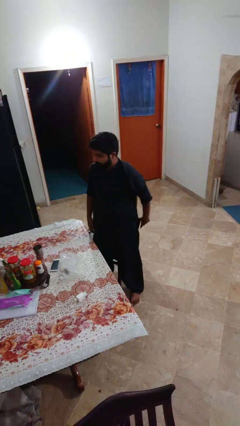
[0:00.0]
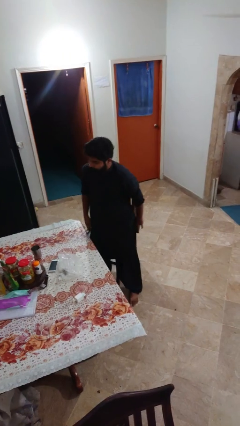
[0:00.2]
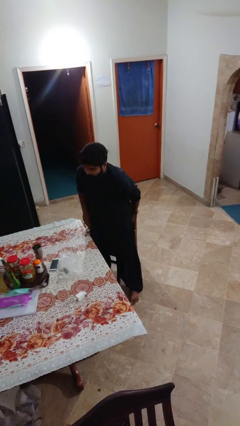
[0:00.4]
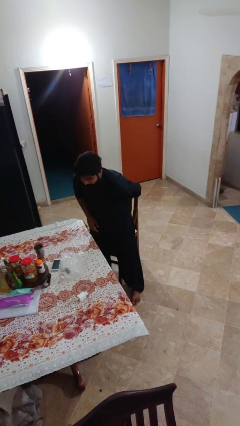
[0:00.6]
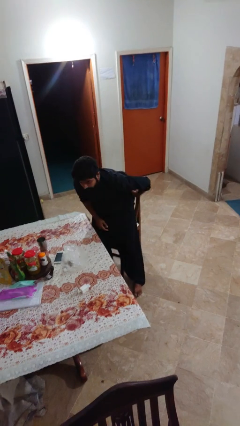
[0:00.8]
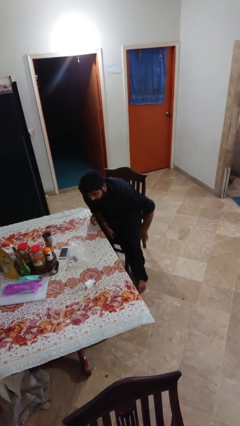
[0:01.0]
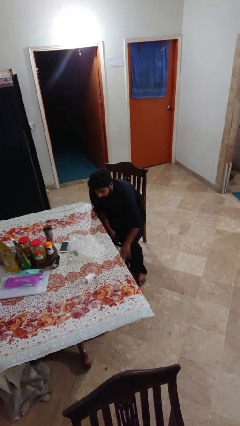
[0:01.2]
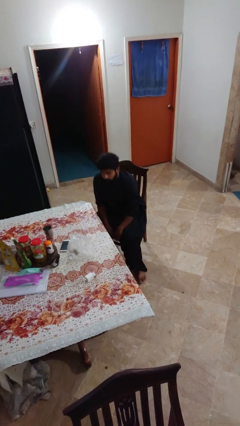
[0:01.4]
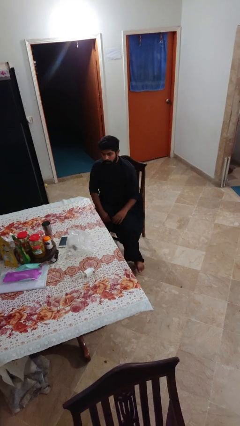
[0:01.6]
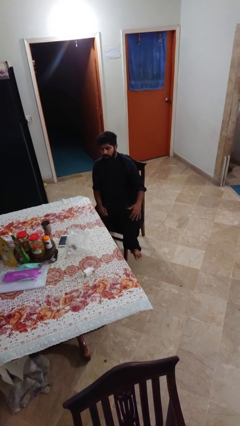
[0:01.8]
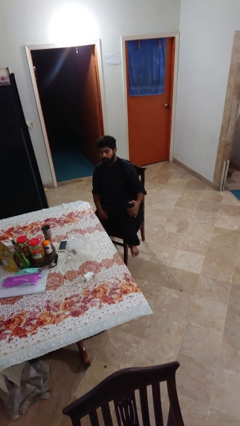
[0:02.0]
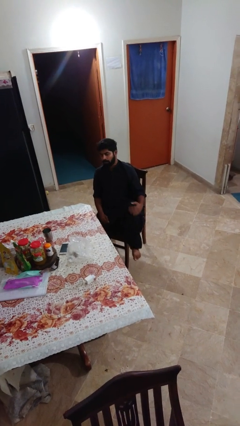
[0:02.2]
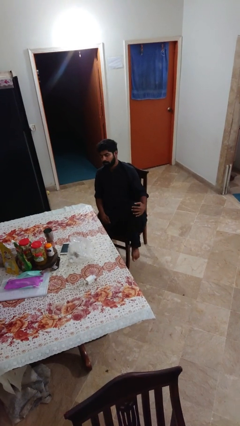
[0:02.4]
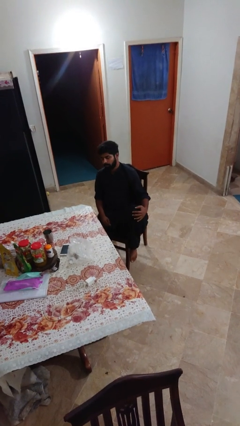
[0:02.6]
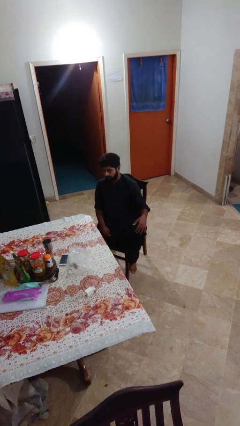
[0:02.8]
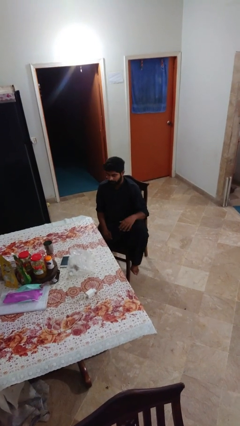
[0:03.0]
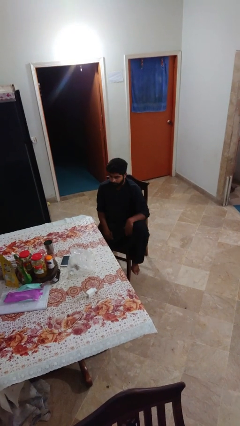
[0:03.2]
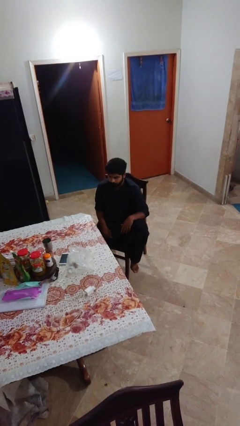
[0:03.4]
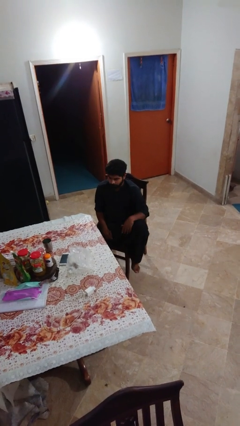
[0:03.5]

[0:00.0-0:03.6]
person sits down

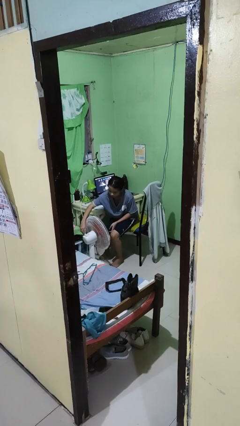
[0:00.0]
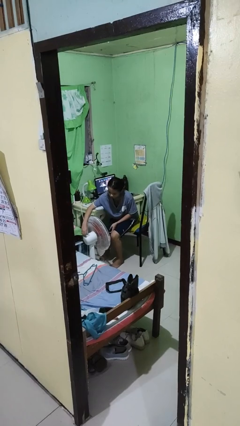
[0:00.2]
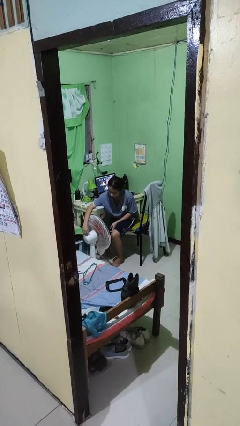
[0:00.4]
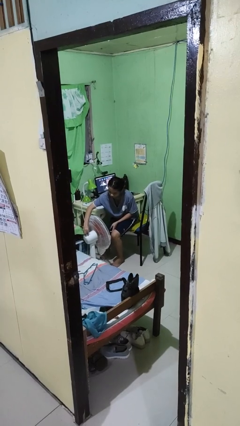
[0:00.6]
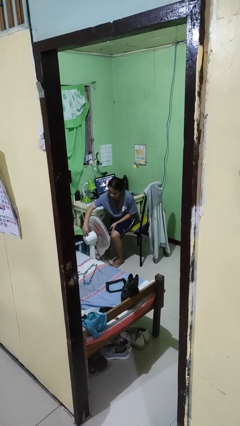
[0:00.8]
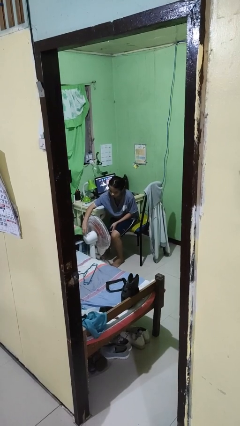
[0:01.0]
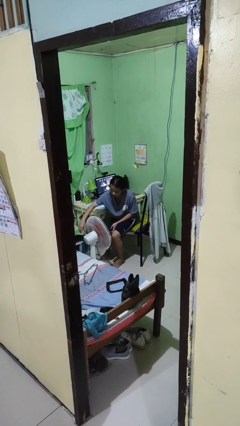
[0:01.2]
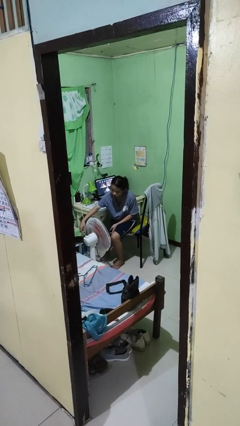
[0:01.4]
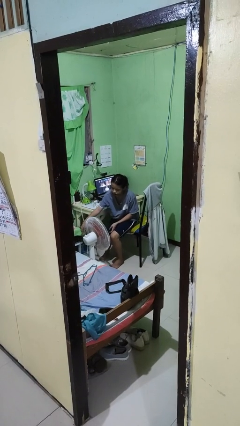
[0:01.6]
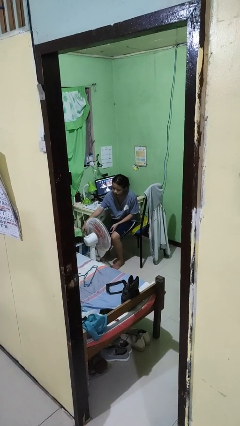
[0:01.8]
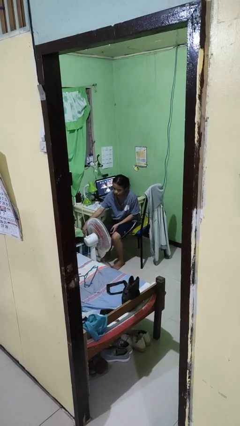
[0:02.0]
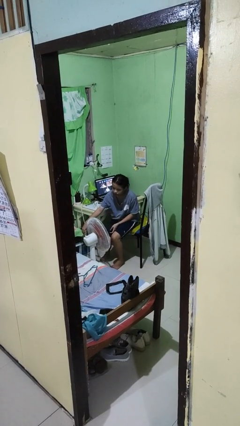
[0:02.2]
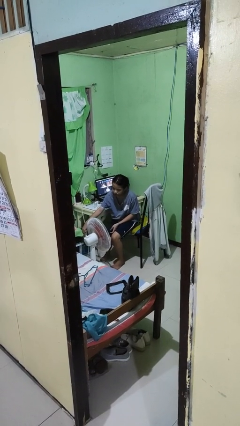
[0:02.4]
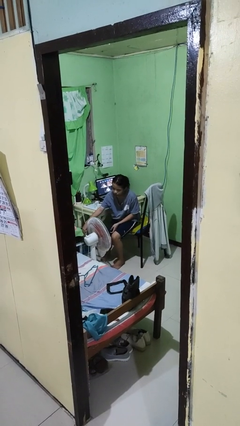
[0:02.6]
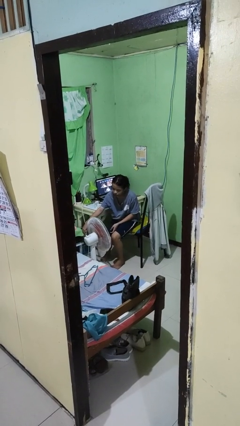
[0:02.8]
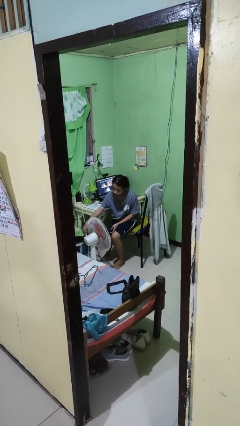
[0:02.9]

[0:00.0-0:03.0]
person turns off fan

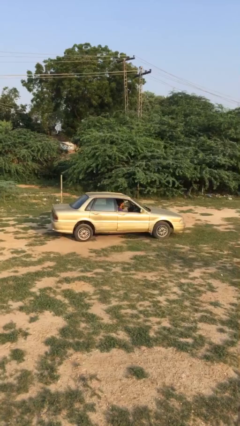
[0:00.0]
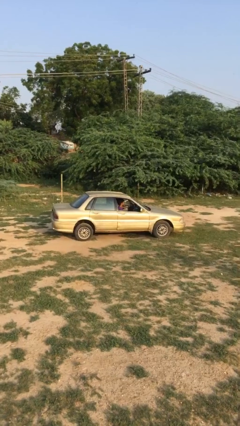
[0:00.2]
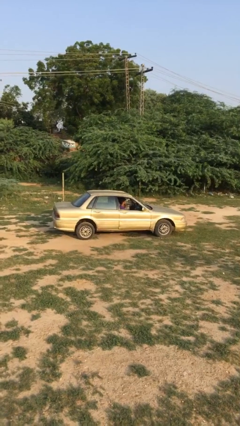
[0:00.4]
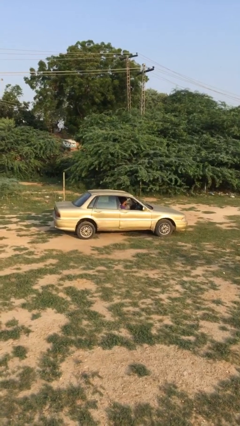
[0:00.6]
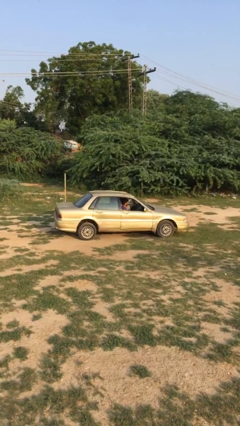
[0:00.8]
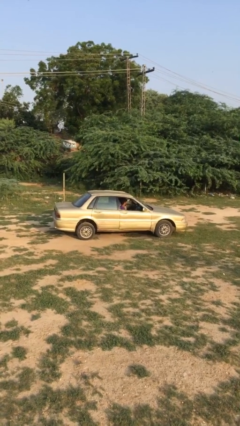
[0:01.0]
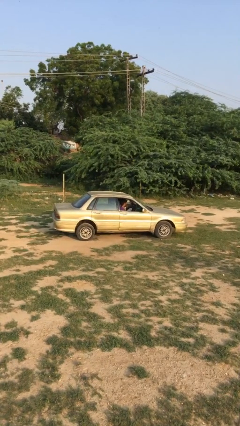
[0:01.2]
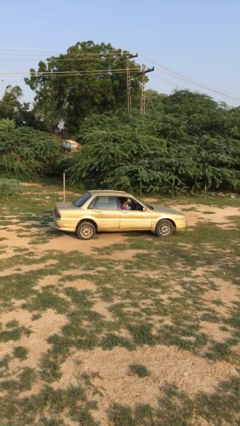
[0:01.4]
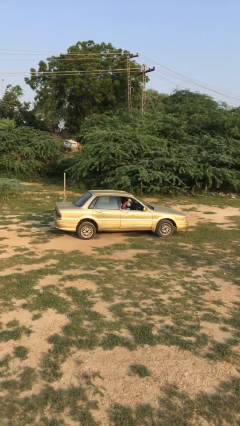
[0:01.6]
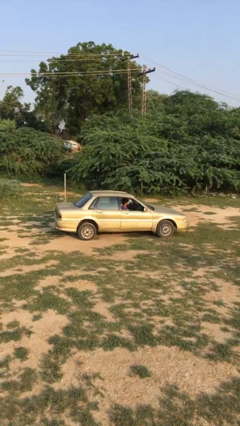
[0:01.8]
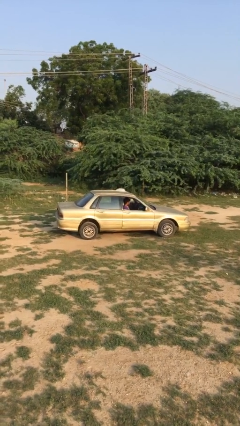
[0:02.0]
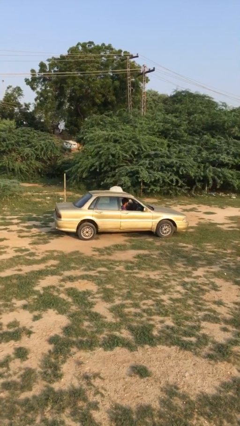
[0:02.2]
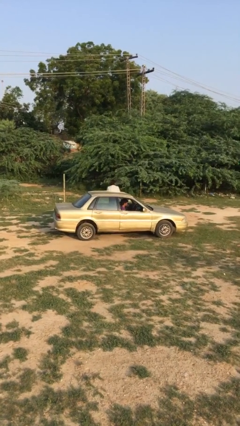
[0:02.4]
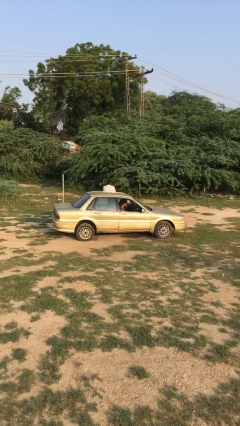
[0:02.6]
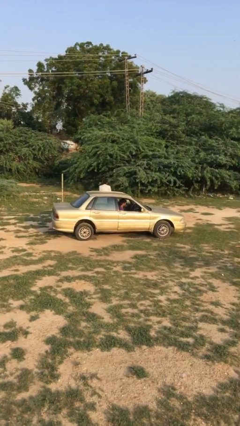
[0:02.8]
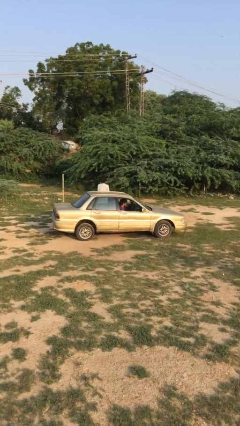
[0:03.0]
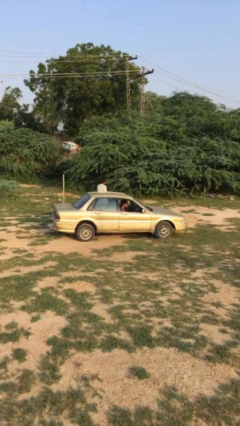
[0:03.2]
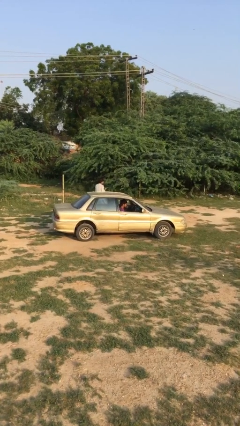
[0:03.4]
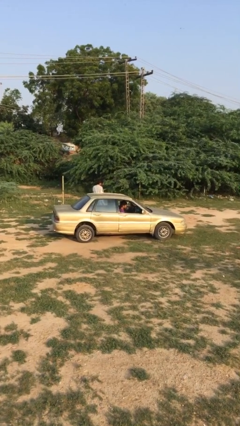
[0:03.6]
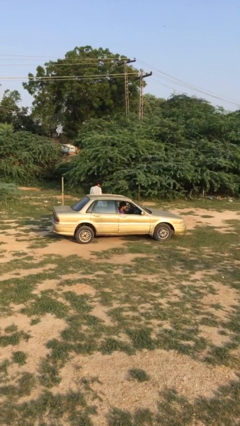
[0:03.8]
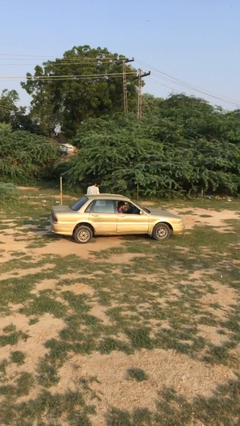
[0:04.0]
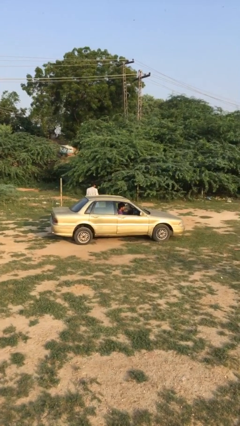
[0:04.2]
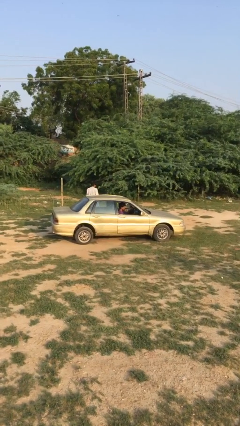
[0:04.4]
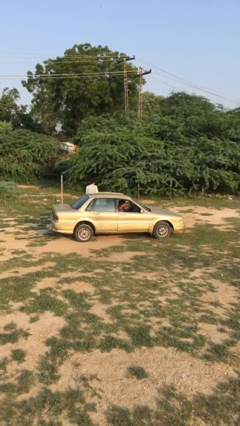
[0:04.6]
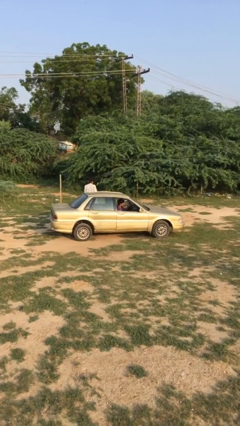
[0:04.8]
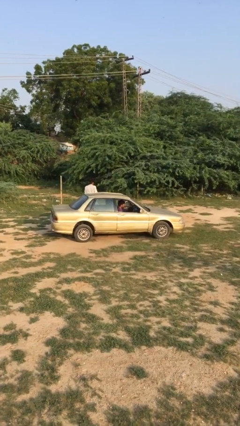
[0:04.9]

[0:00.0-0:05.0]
car drops off person

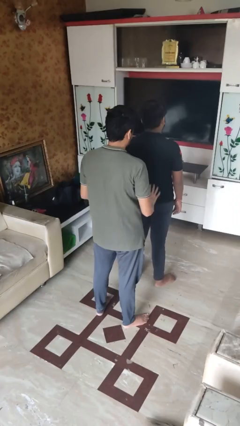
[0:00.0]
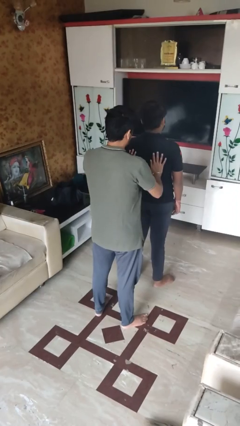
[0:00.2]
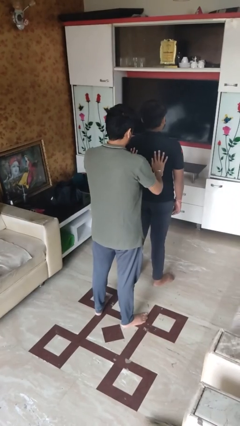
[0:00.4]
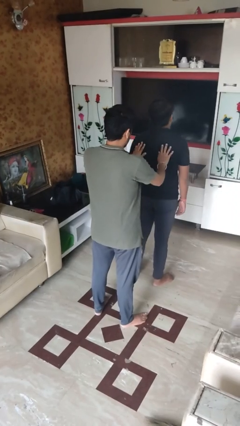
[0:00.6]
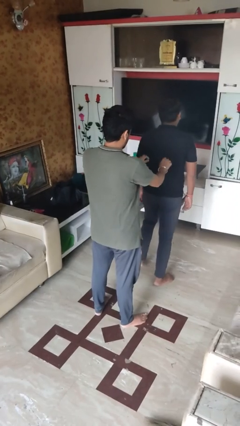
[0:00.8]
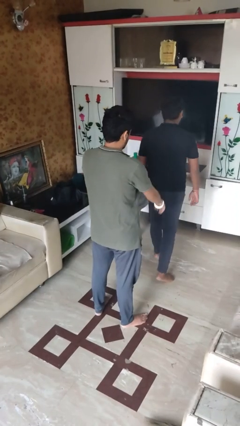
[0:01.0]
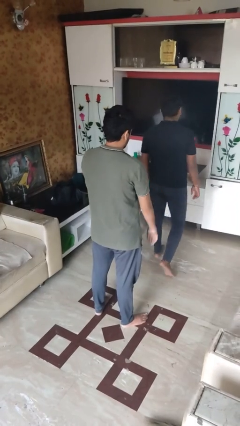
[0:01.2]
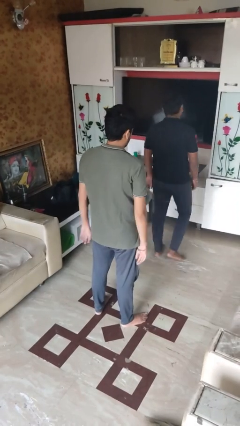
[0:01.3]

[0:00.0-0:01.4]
person shoves person

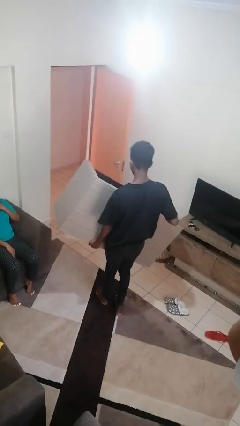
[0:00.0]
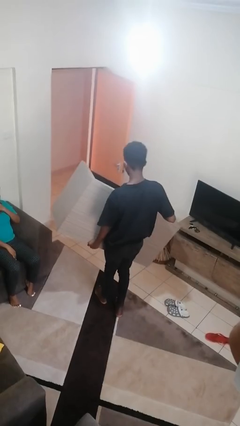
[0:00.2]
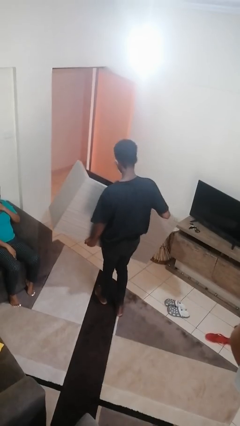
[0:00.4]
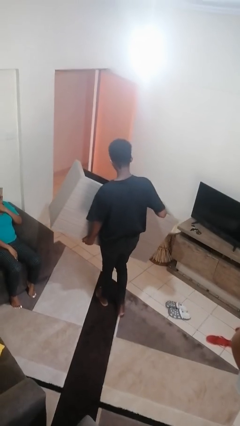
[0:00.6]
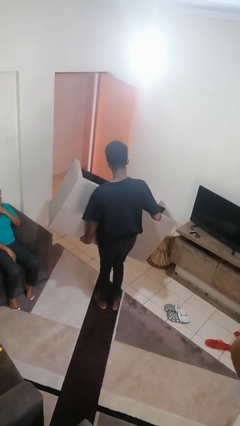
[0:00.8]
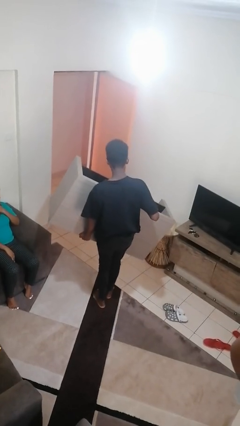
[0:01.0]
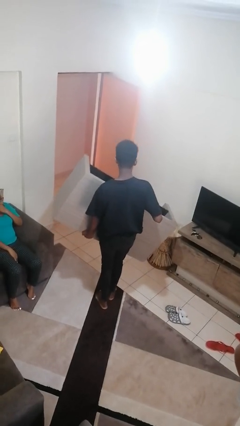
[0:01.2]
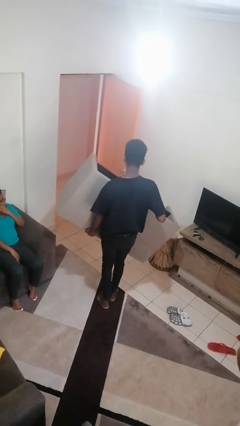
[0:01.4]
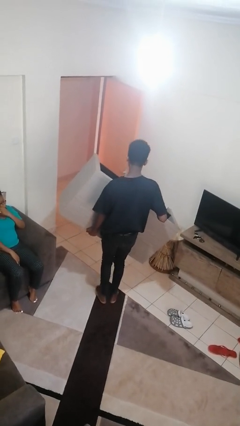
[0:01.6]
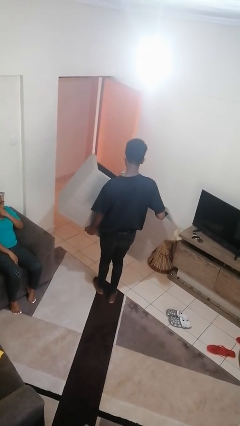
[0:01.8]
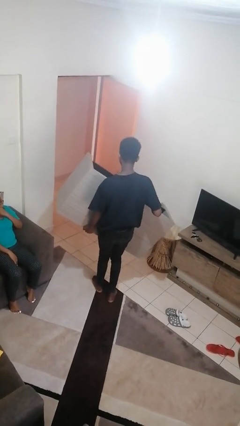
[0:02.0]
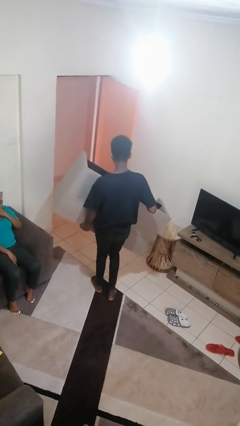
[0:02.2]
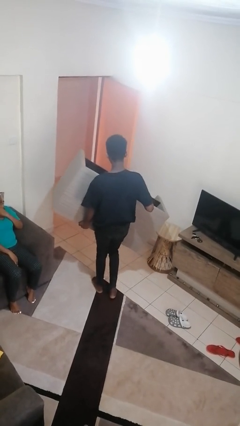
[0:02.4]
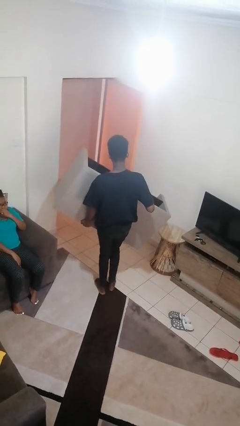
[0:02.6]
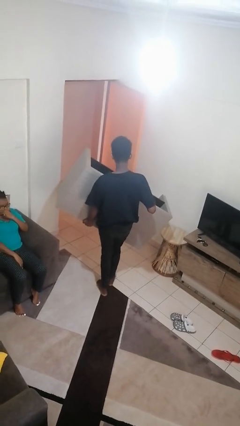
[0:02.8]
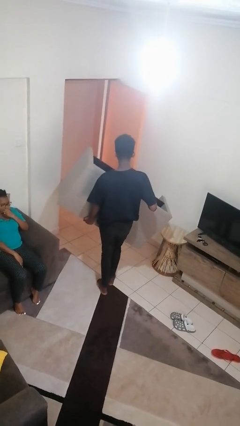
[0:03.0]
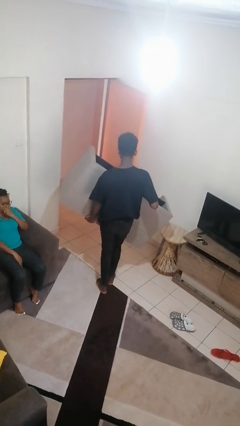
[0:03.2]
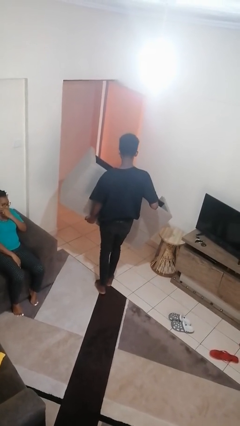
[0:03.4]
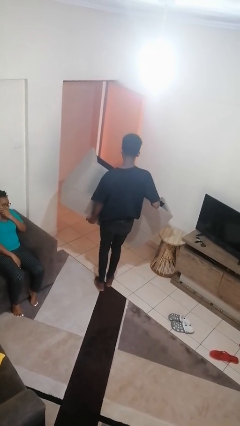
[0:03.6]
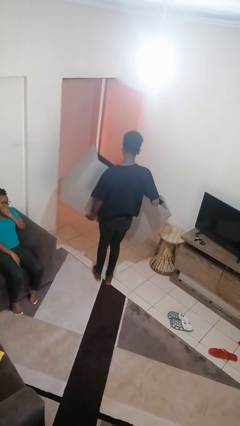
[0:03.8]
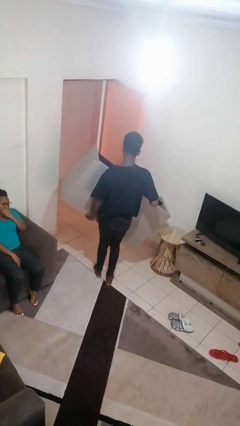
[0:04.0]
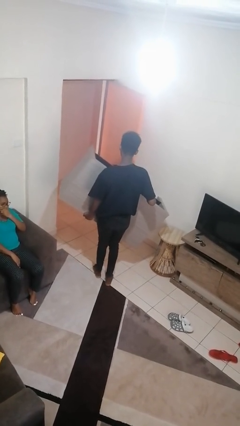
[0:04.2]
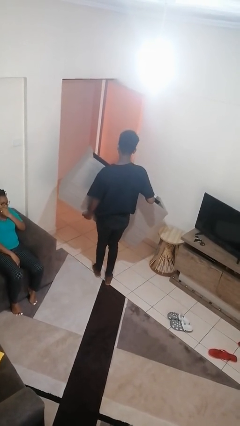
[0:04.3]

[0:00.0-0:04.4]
person carries furniture
